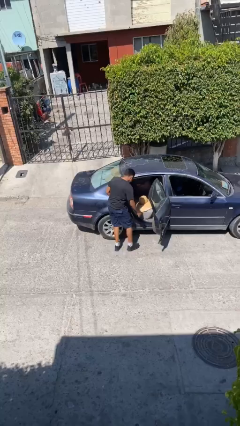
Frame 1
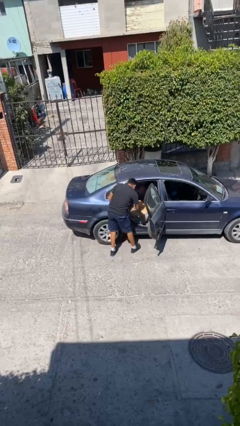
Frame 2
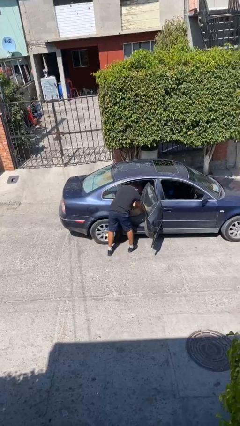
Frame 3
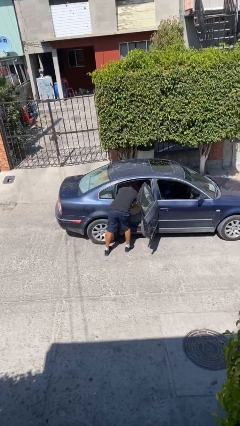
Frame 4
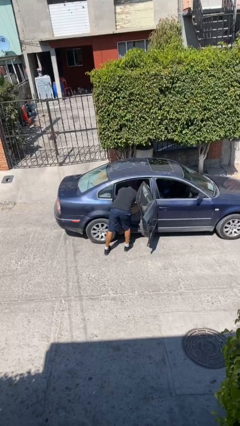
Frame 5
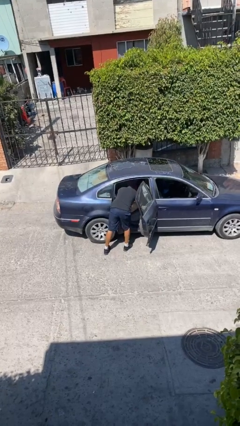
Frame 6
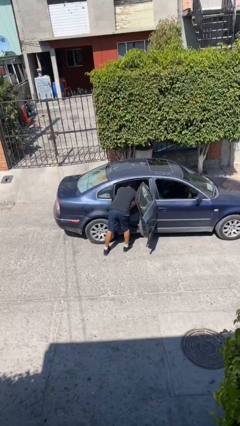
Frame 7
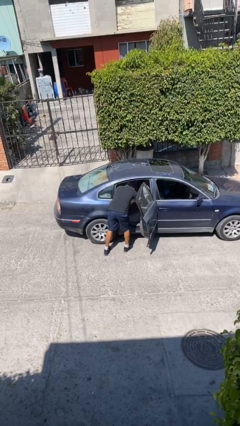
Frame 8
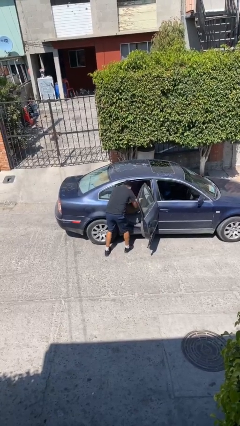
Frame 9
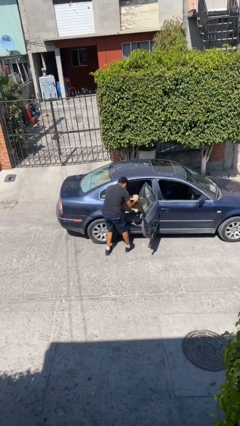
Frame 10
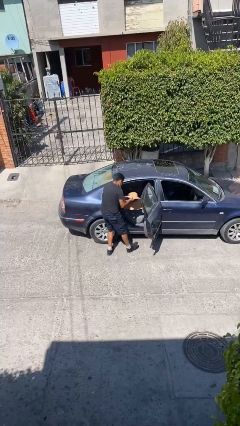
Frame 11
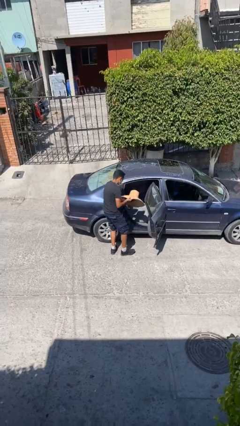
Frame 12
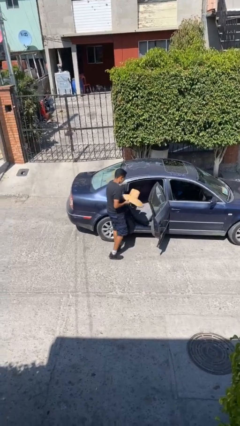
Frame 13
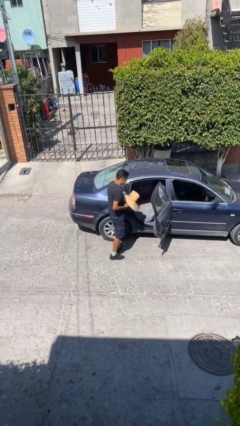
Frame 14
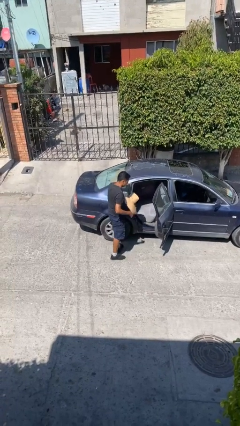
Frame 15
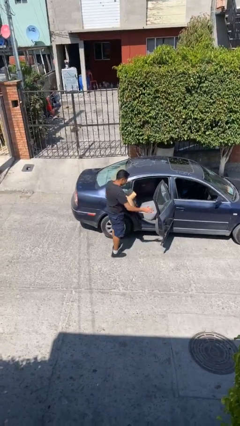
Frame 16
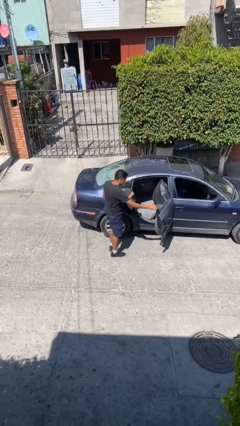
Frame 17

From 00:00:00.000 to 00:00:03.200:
person unloads car

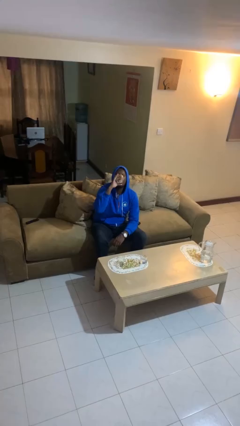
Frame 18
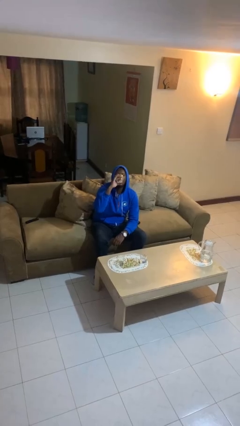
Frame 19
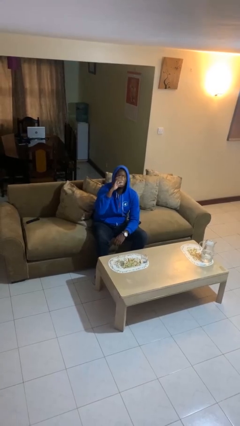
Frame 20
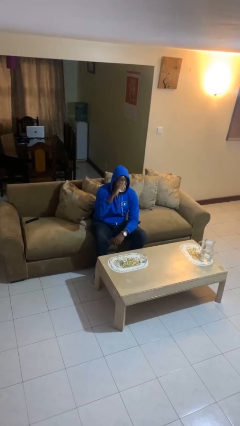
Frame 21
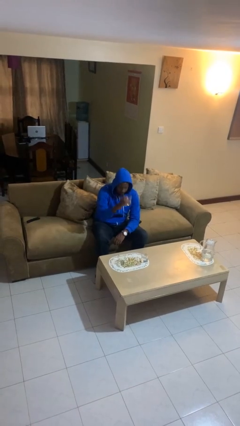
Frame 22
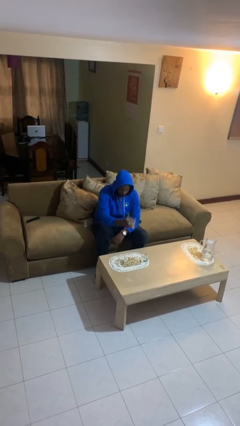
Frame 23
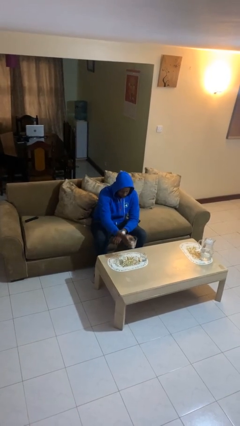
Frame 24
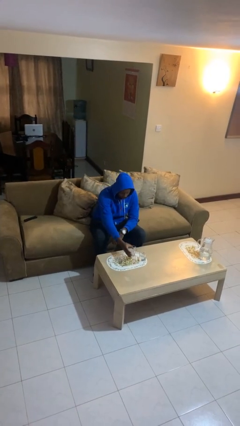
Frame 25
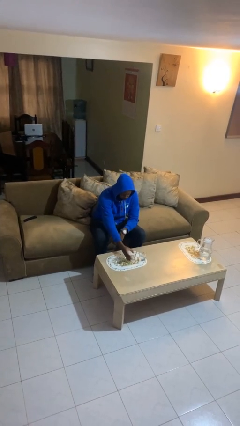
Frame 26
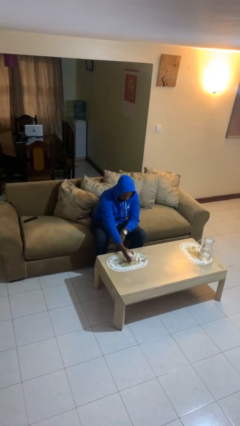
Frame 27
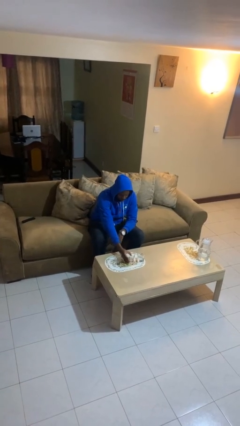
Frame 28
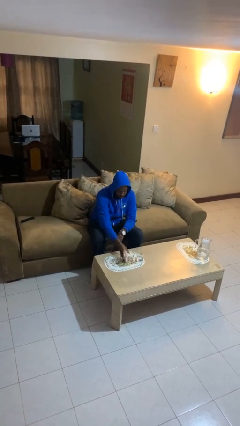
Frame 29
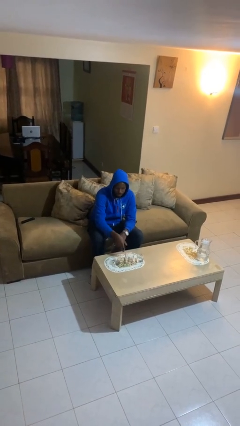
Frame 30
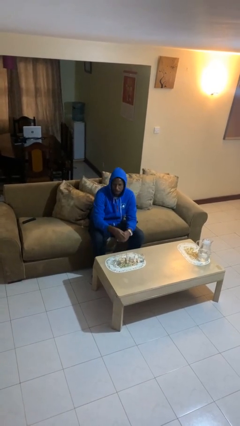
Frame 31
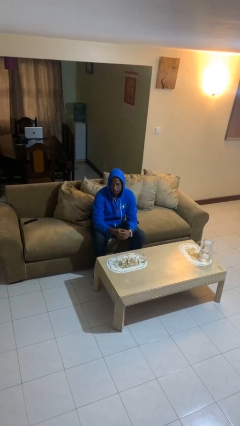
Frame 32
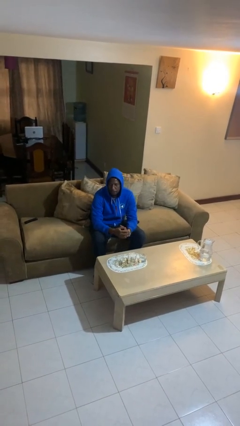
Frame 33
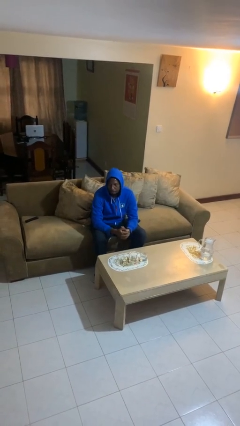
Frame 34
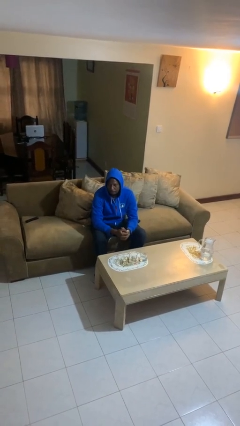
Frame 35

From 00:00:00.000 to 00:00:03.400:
person puts down object on table

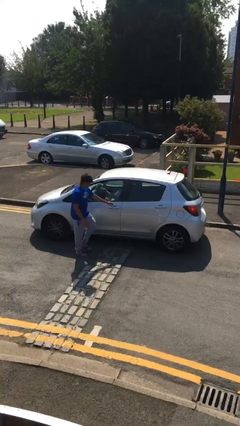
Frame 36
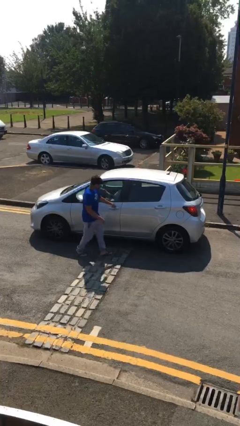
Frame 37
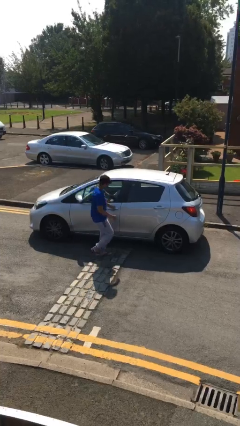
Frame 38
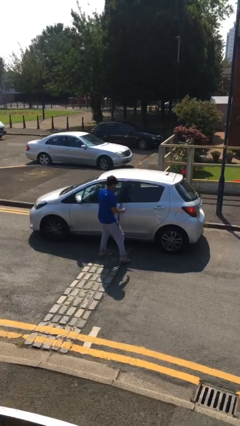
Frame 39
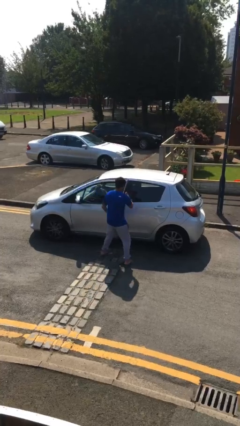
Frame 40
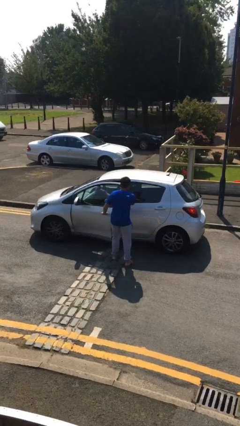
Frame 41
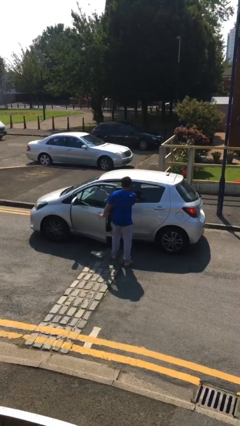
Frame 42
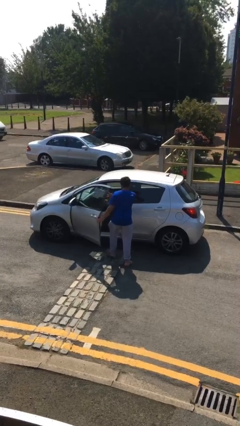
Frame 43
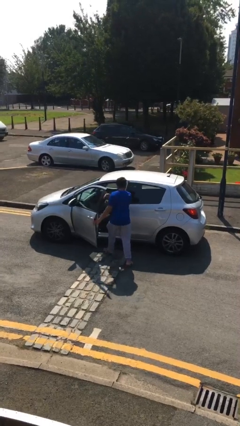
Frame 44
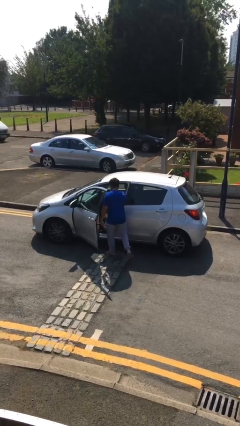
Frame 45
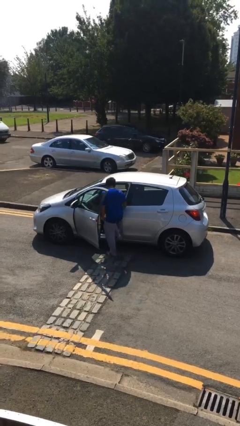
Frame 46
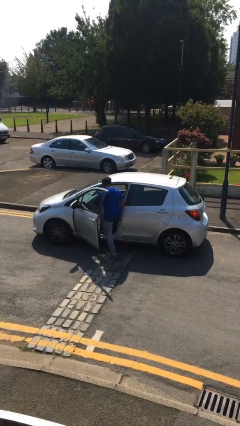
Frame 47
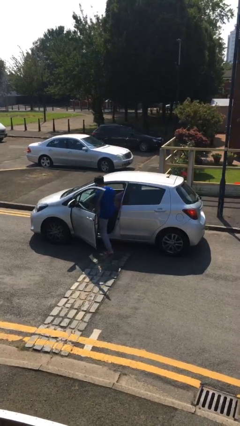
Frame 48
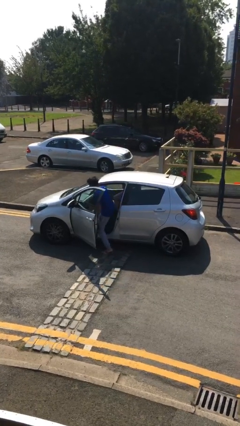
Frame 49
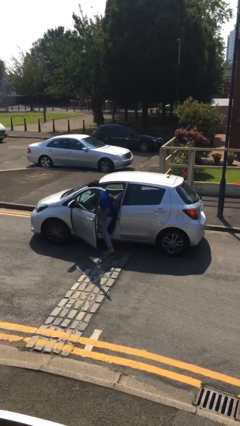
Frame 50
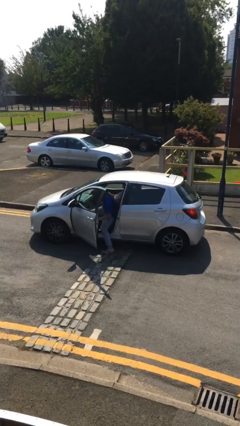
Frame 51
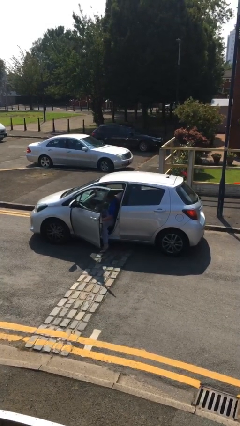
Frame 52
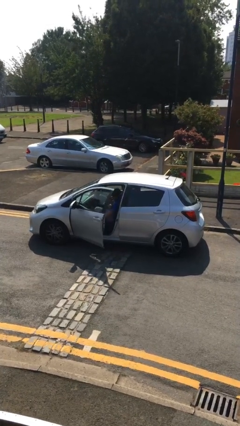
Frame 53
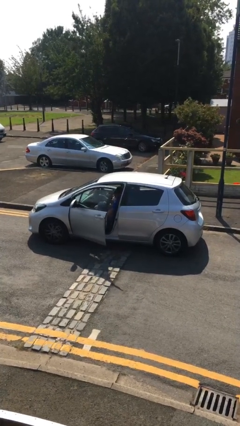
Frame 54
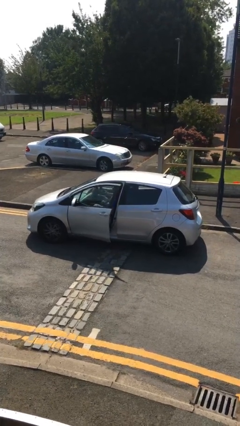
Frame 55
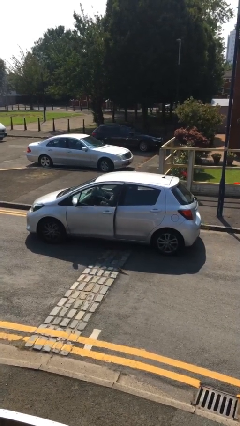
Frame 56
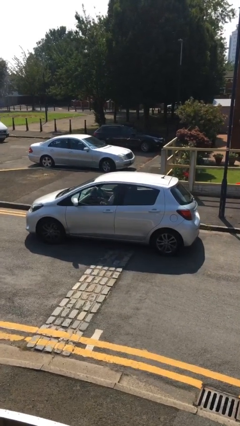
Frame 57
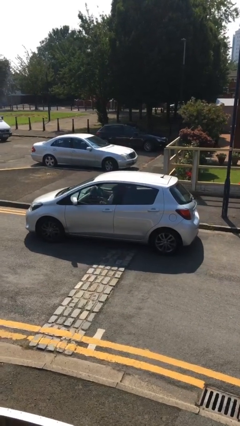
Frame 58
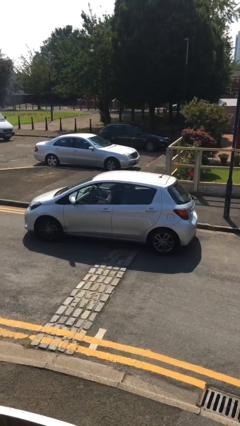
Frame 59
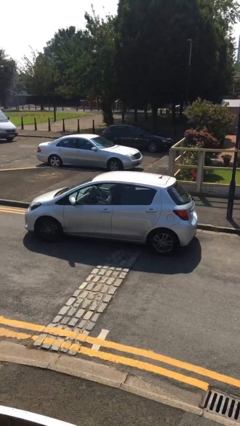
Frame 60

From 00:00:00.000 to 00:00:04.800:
car picks up person

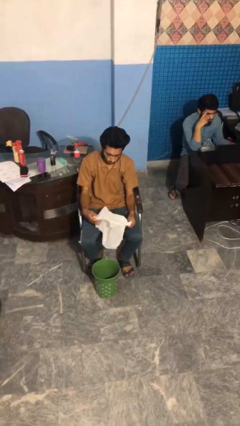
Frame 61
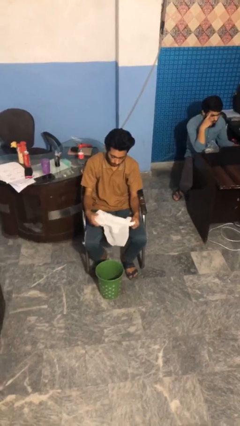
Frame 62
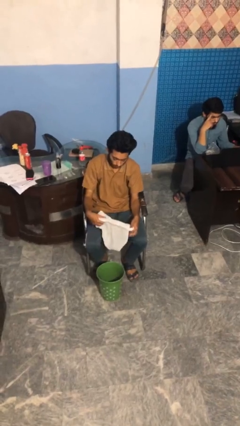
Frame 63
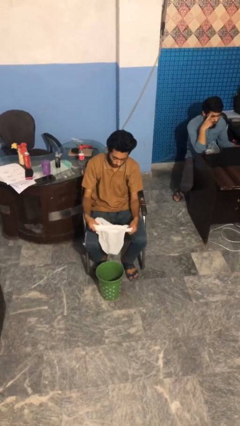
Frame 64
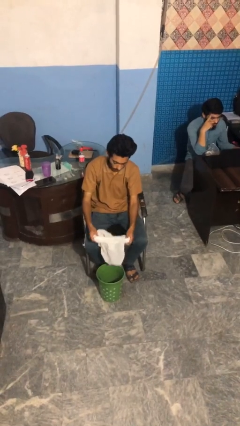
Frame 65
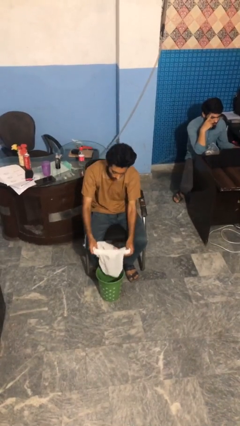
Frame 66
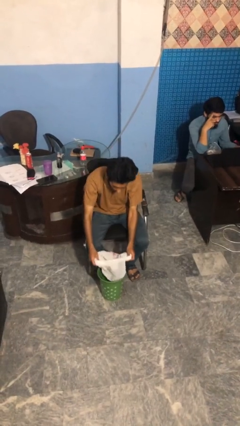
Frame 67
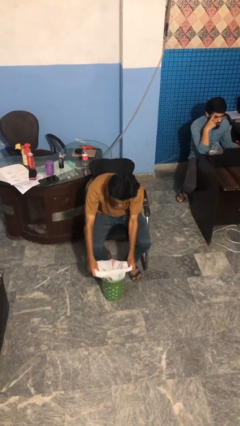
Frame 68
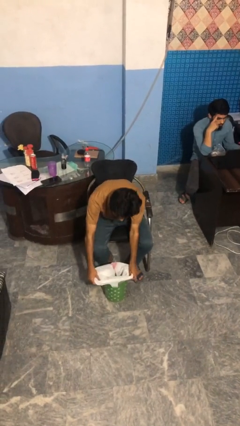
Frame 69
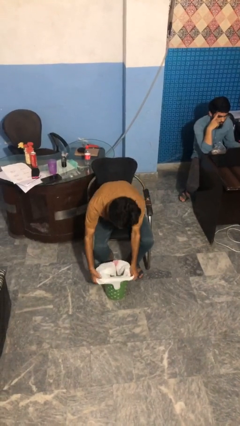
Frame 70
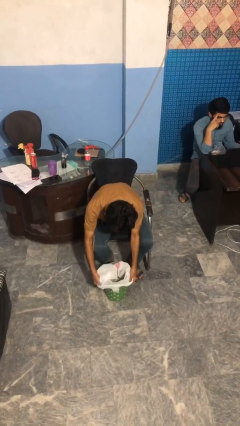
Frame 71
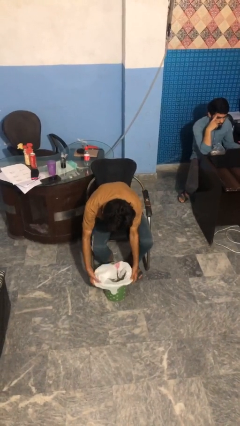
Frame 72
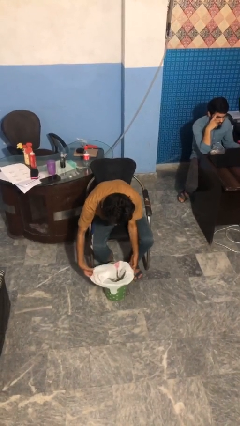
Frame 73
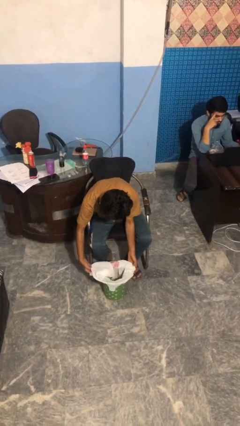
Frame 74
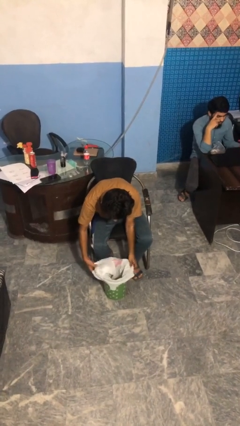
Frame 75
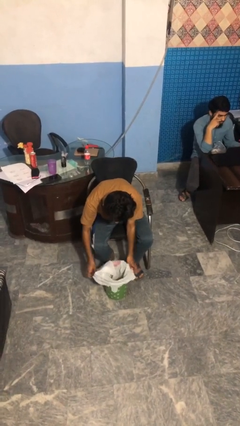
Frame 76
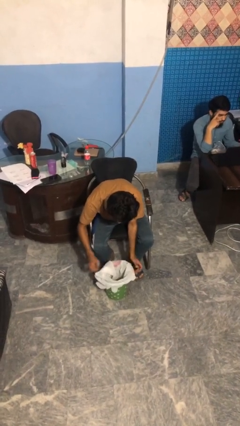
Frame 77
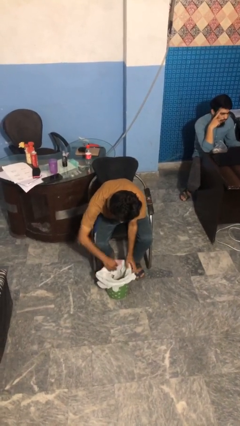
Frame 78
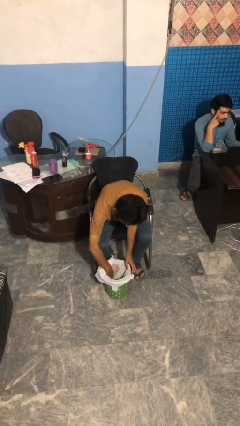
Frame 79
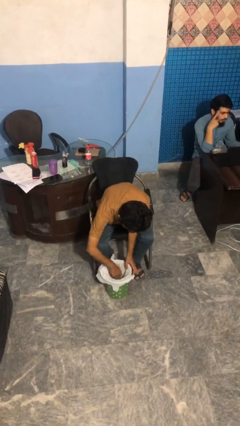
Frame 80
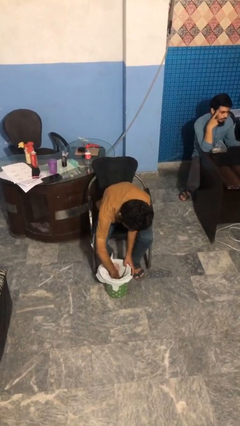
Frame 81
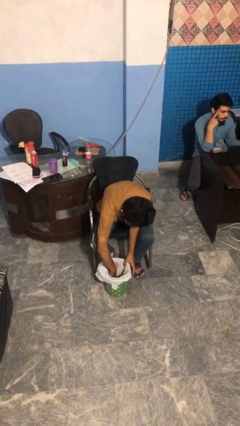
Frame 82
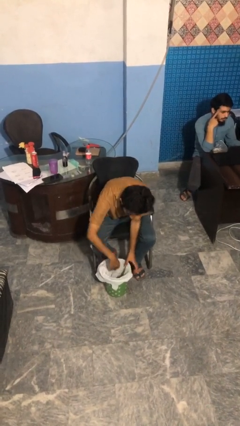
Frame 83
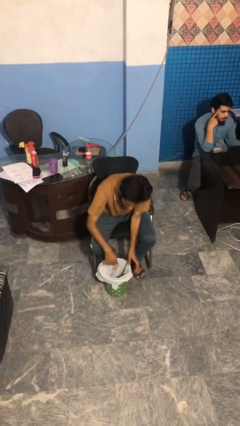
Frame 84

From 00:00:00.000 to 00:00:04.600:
person inserts trashbag into trashcan

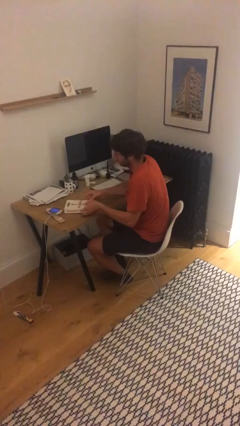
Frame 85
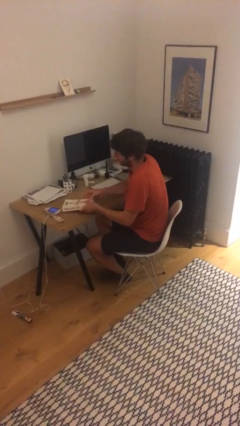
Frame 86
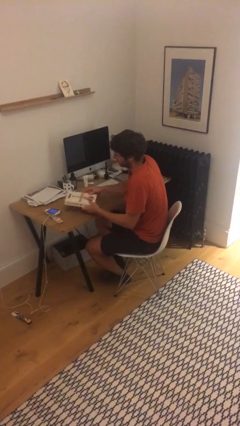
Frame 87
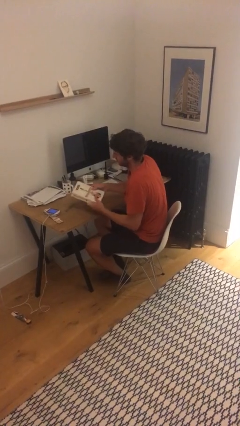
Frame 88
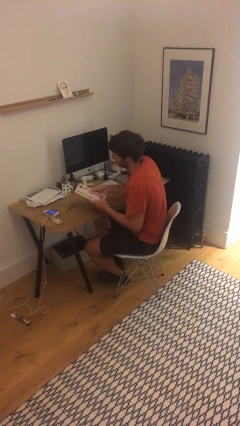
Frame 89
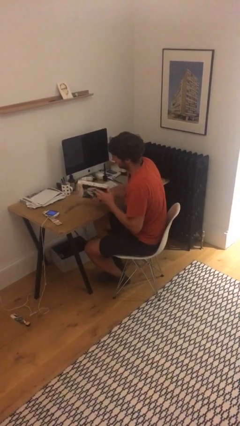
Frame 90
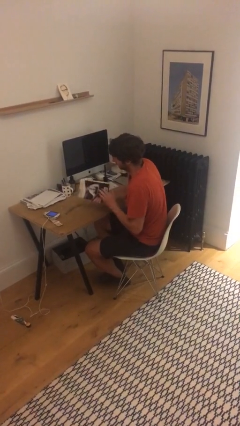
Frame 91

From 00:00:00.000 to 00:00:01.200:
person picks up object from table

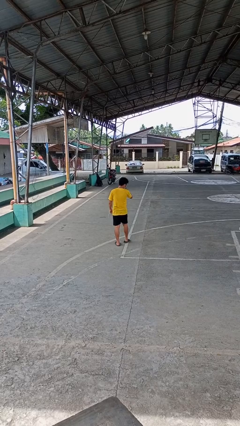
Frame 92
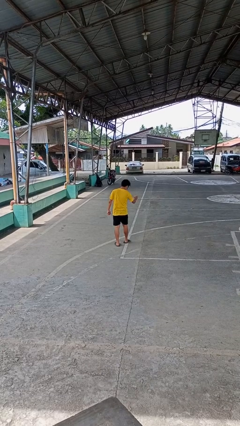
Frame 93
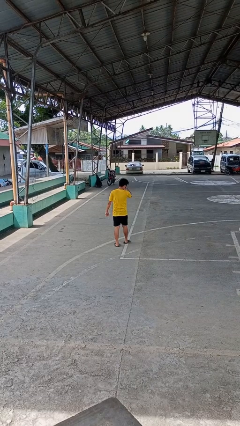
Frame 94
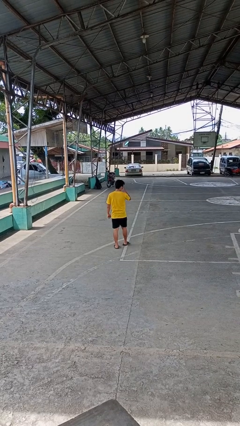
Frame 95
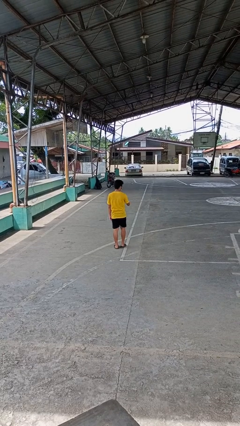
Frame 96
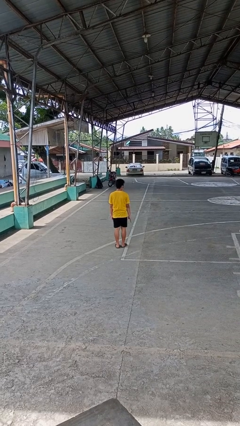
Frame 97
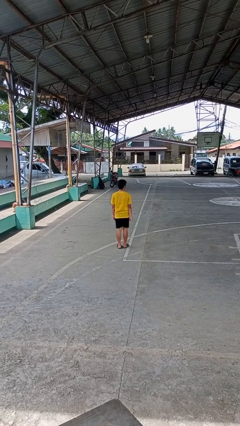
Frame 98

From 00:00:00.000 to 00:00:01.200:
person karate chop
